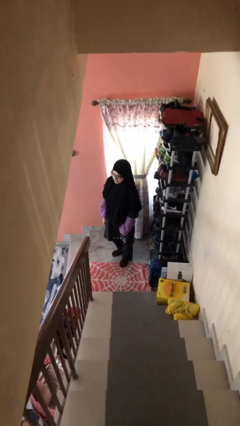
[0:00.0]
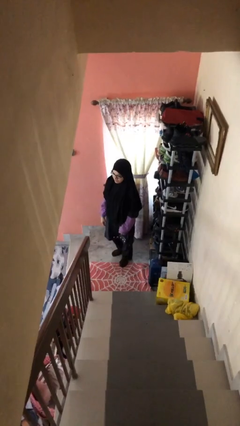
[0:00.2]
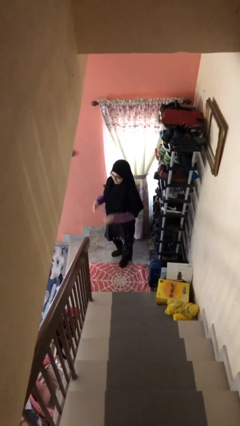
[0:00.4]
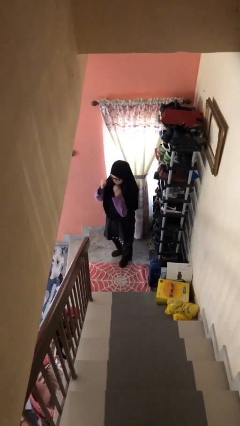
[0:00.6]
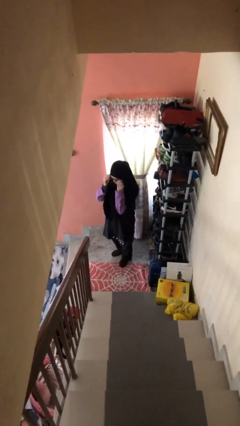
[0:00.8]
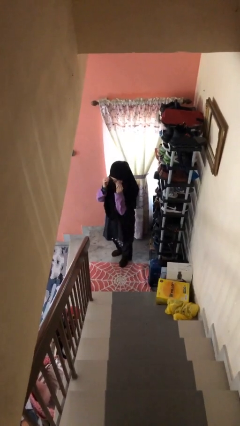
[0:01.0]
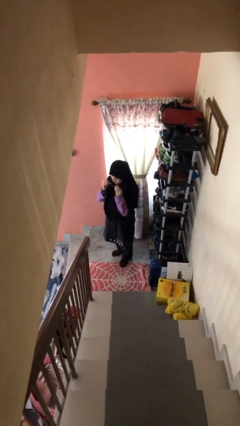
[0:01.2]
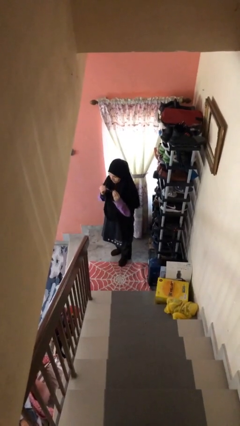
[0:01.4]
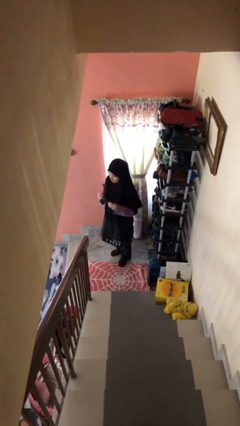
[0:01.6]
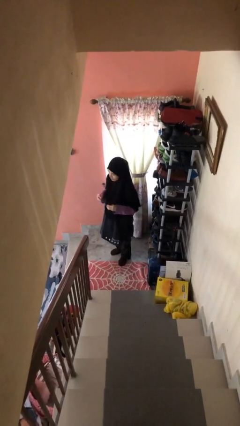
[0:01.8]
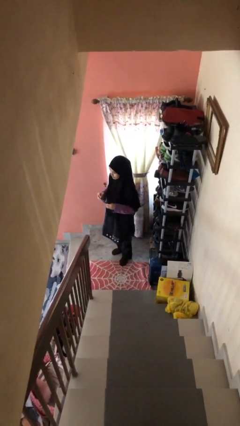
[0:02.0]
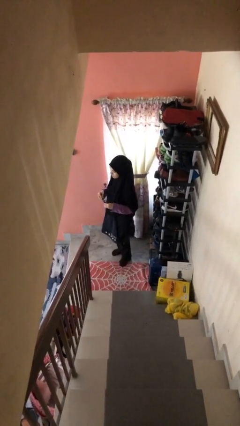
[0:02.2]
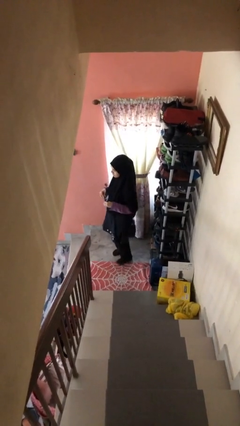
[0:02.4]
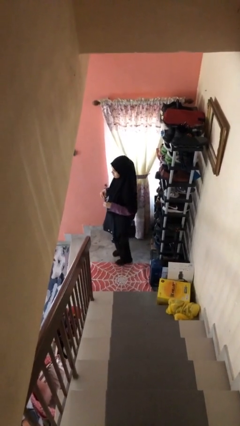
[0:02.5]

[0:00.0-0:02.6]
person takes off glasses

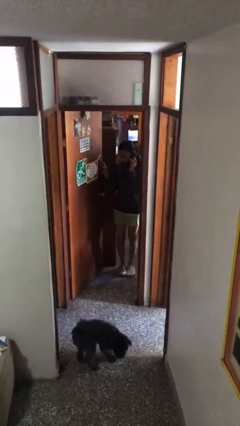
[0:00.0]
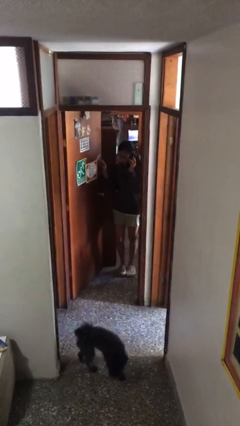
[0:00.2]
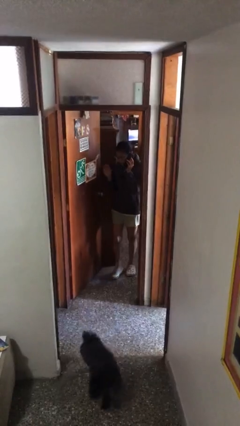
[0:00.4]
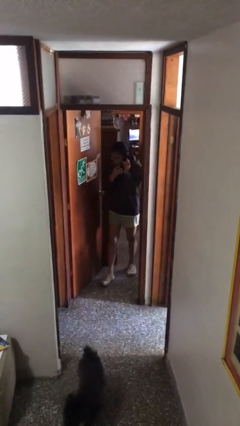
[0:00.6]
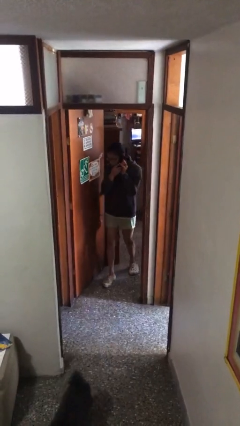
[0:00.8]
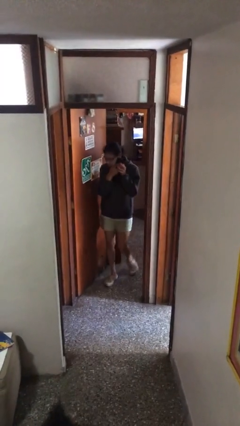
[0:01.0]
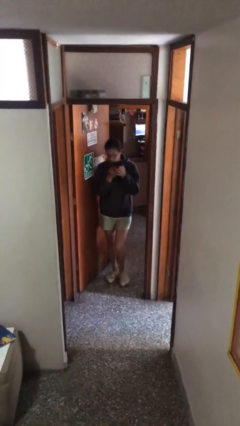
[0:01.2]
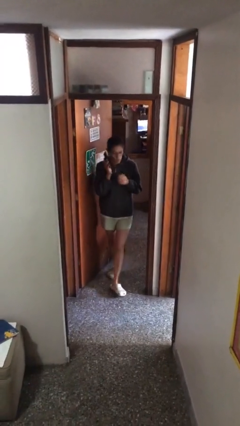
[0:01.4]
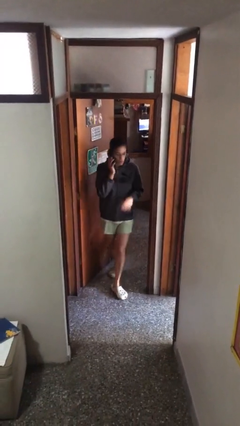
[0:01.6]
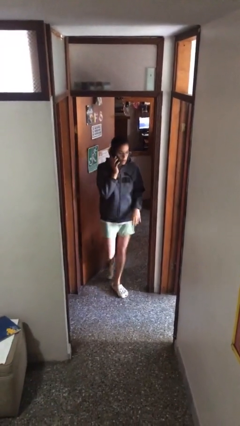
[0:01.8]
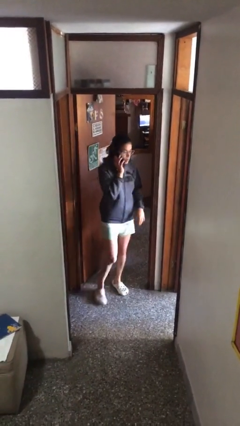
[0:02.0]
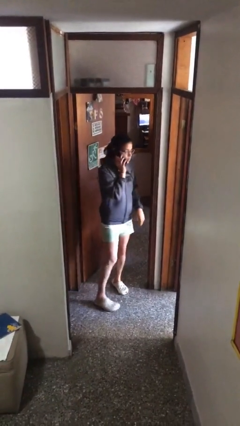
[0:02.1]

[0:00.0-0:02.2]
person enters scene through structure

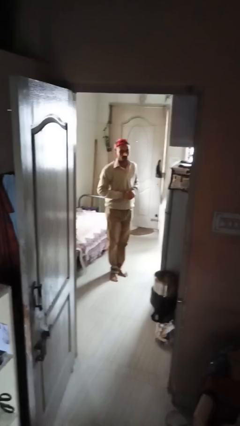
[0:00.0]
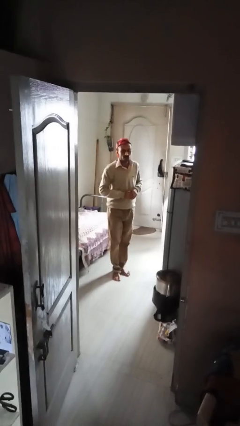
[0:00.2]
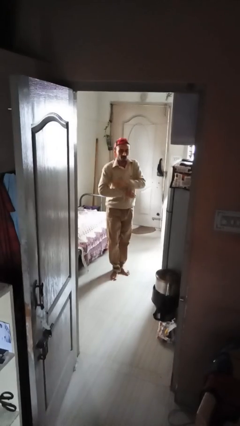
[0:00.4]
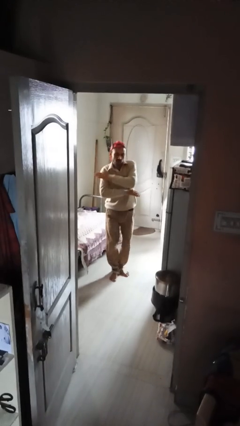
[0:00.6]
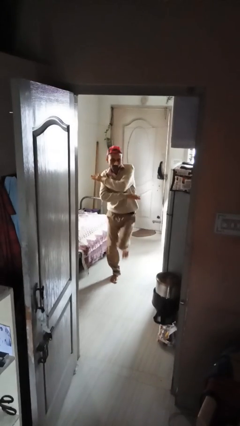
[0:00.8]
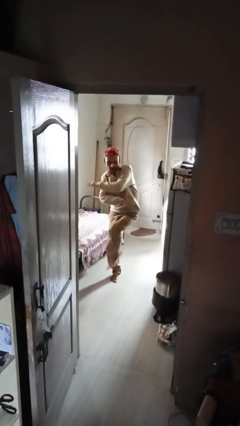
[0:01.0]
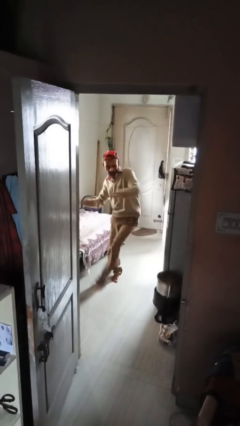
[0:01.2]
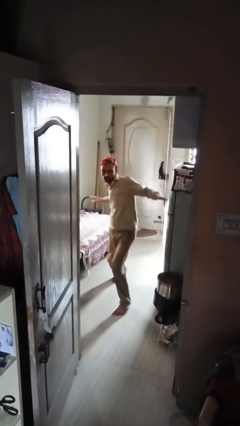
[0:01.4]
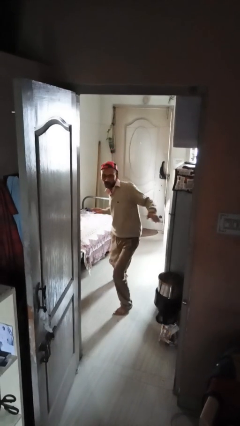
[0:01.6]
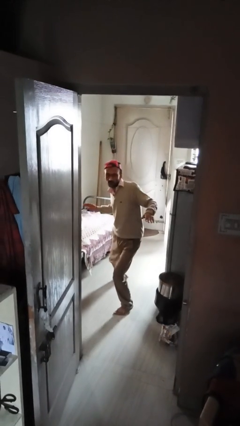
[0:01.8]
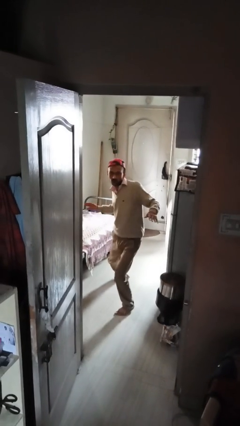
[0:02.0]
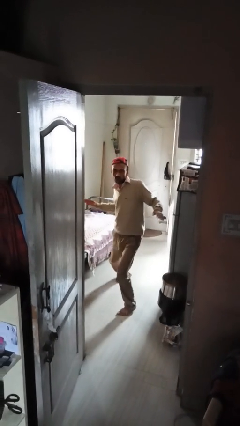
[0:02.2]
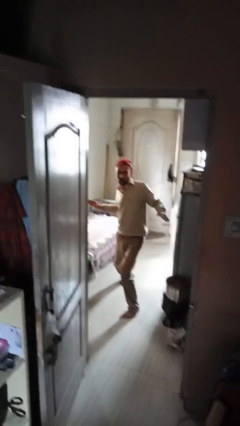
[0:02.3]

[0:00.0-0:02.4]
person karate chop

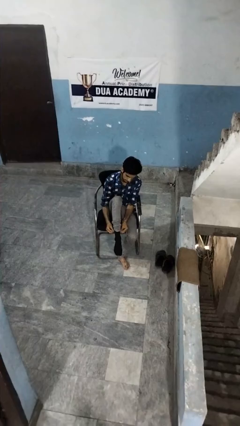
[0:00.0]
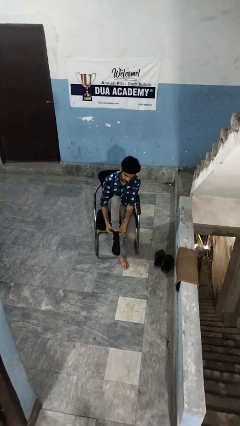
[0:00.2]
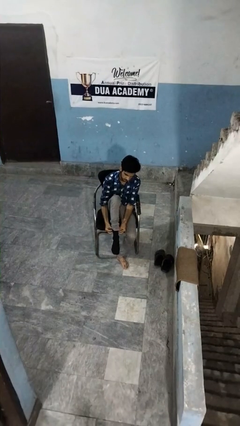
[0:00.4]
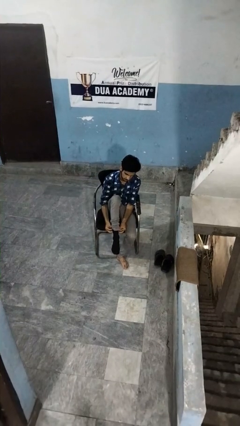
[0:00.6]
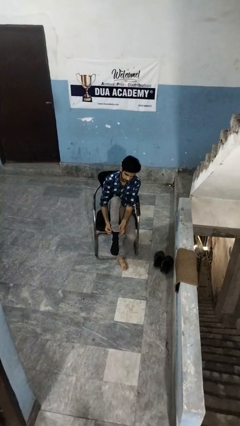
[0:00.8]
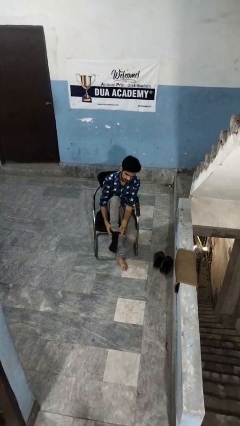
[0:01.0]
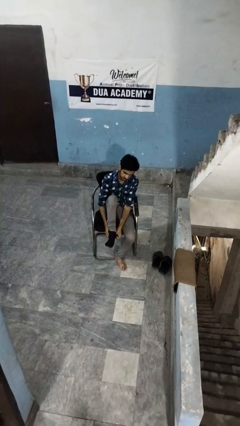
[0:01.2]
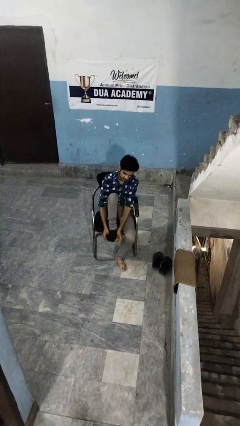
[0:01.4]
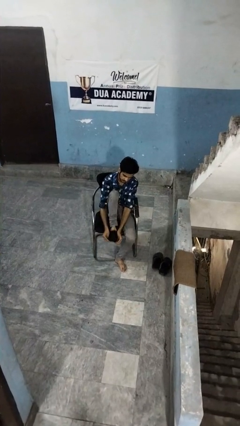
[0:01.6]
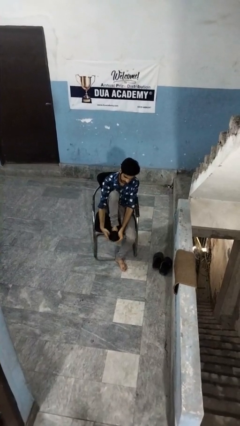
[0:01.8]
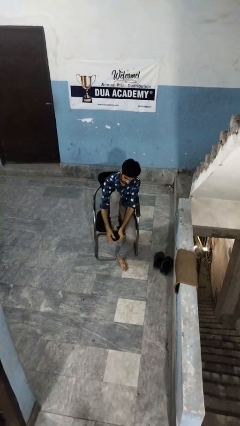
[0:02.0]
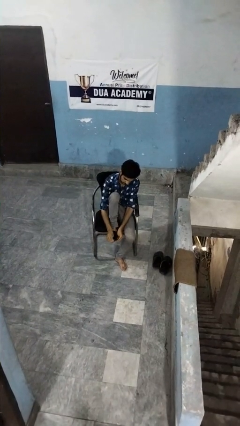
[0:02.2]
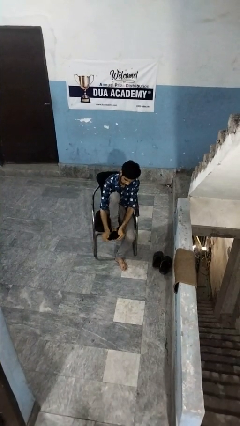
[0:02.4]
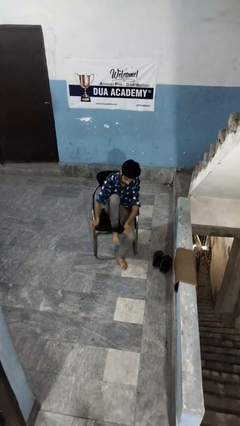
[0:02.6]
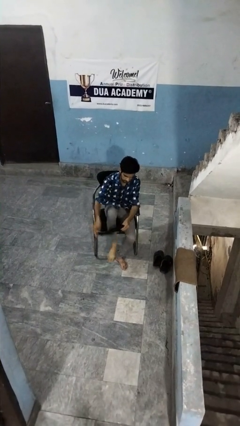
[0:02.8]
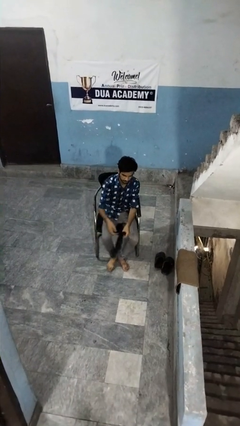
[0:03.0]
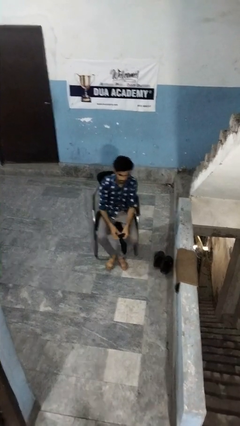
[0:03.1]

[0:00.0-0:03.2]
person takes off socks

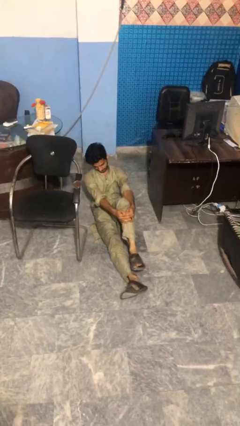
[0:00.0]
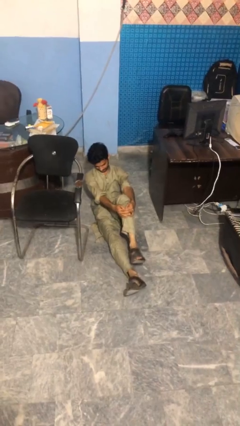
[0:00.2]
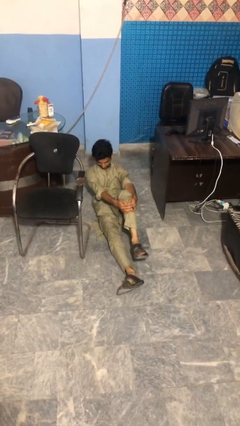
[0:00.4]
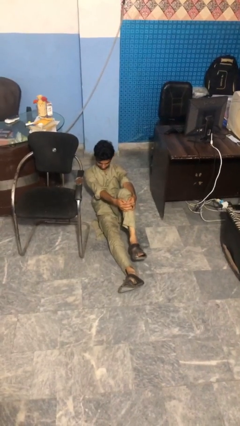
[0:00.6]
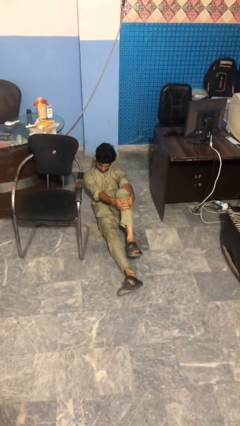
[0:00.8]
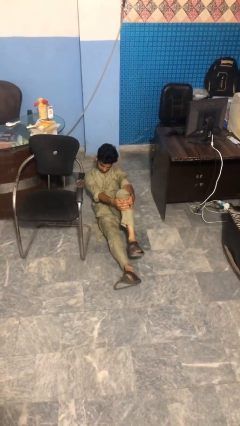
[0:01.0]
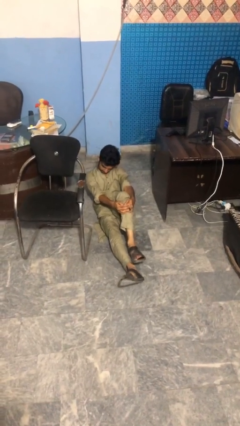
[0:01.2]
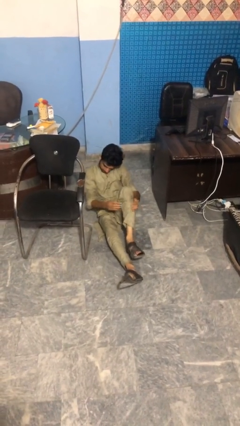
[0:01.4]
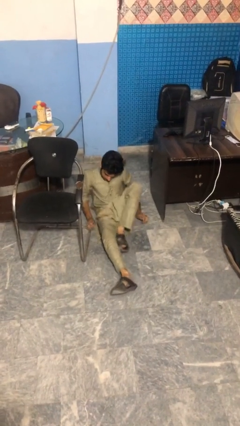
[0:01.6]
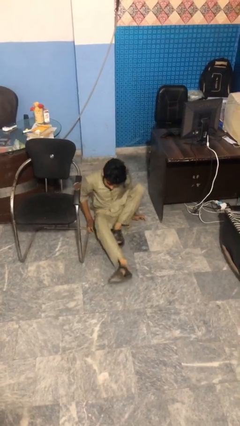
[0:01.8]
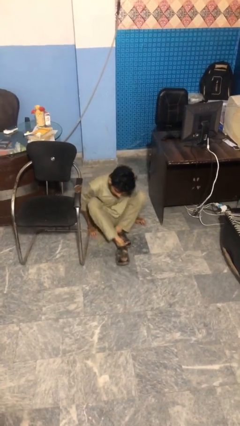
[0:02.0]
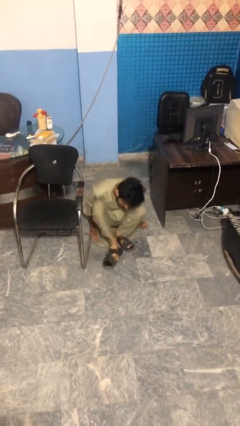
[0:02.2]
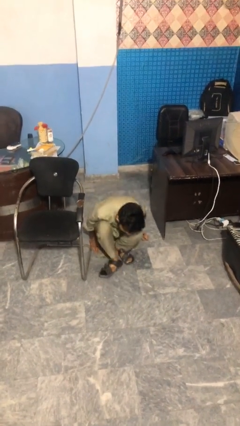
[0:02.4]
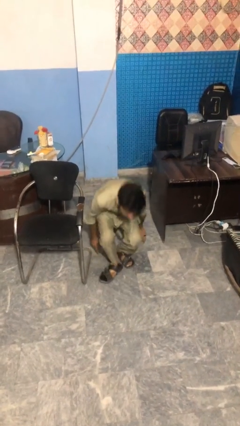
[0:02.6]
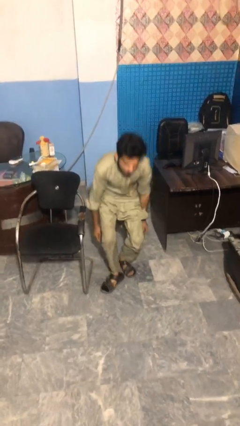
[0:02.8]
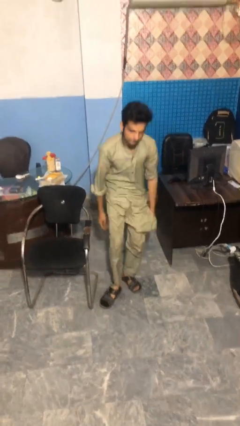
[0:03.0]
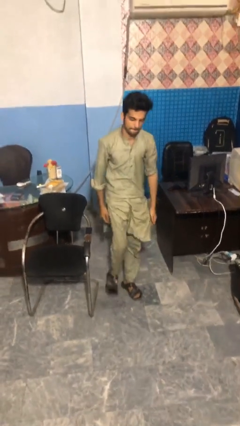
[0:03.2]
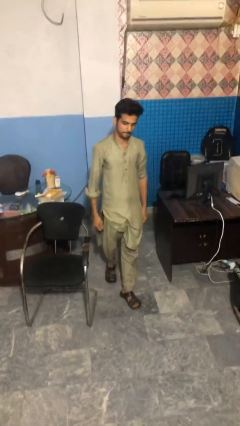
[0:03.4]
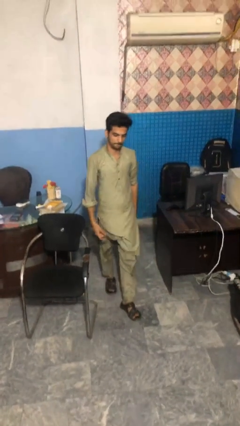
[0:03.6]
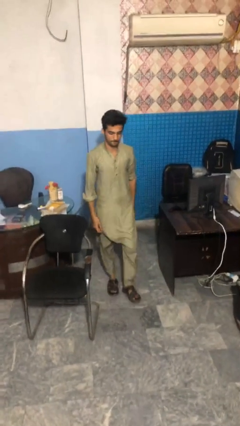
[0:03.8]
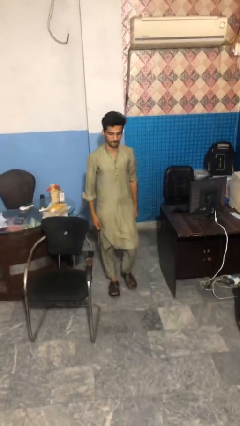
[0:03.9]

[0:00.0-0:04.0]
person stands up from floor

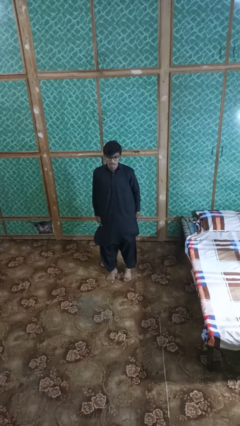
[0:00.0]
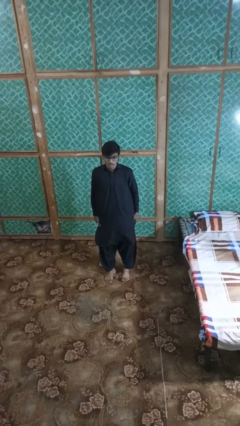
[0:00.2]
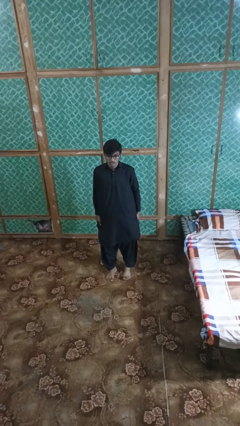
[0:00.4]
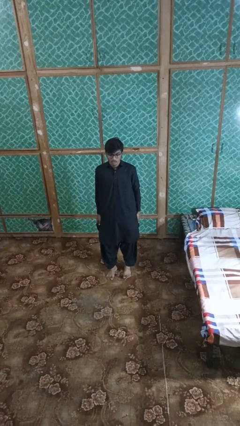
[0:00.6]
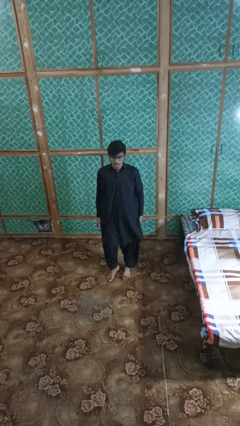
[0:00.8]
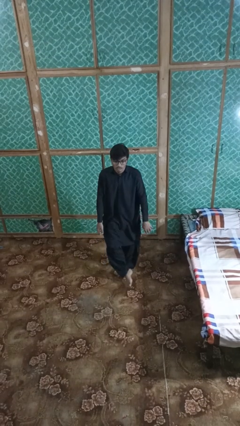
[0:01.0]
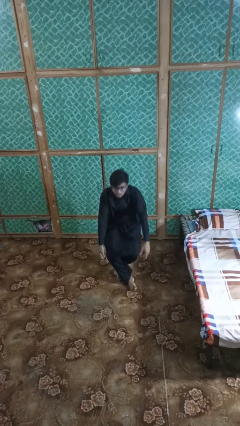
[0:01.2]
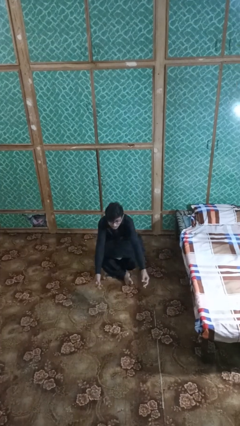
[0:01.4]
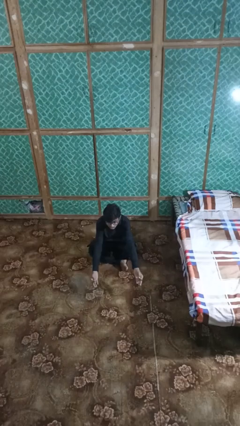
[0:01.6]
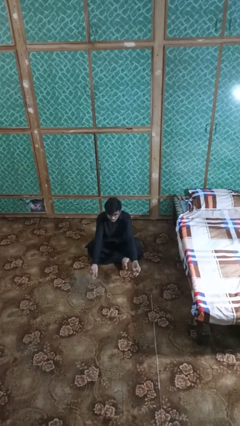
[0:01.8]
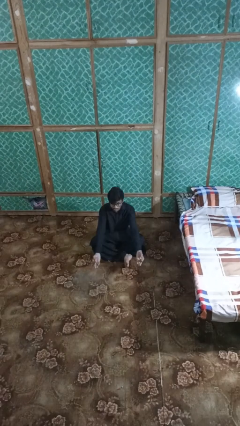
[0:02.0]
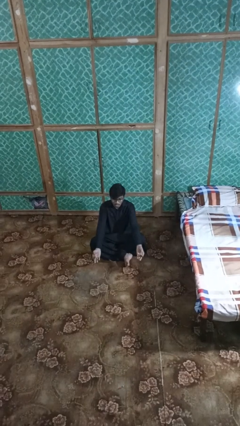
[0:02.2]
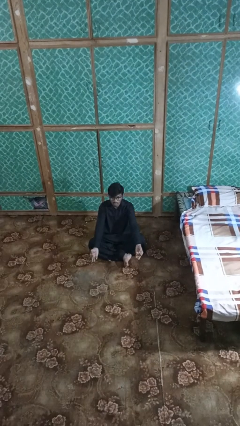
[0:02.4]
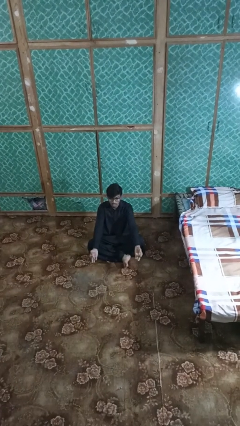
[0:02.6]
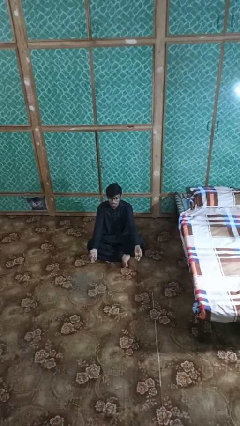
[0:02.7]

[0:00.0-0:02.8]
person sits crisscross

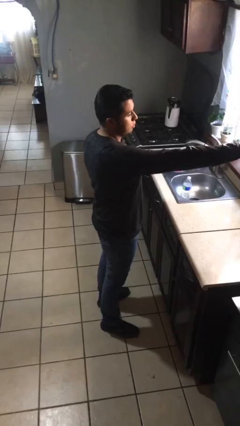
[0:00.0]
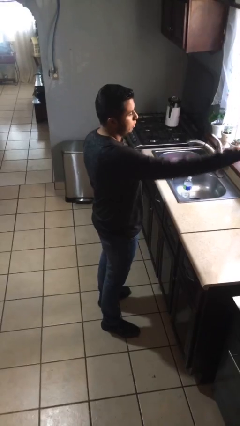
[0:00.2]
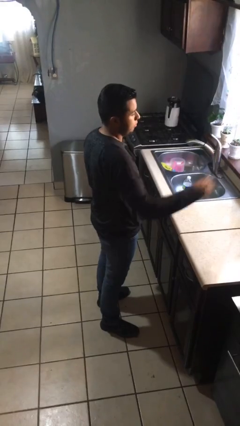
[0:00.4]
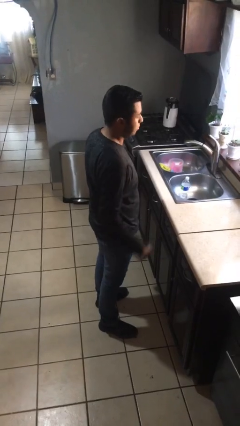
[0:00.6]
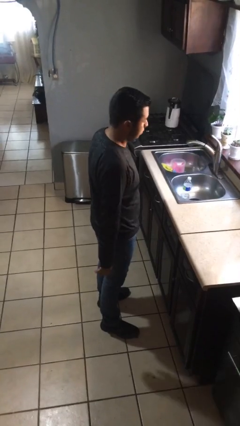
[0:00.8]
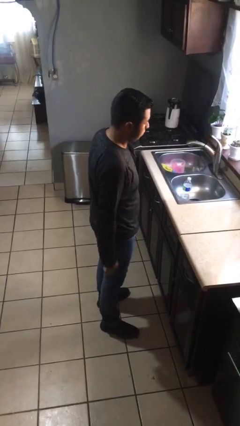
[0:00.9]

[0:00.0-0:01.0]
person closes cabinet
